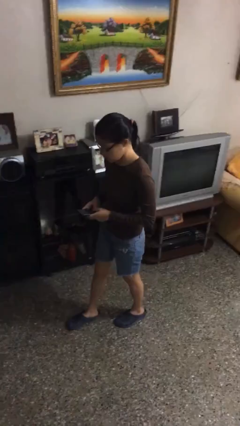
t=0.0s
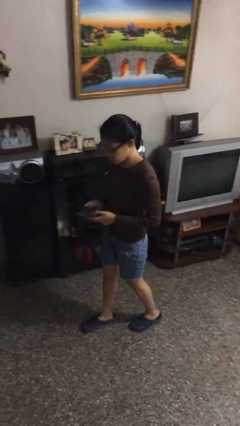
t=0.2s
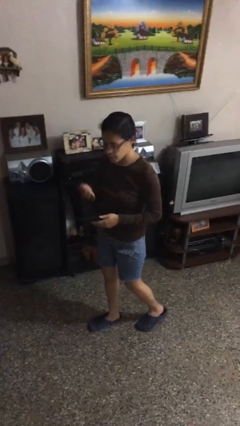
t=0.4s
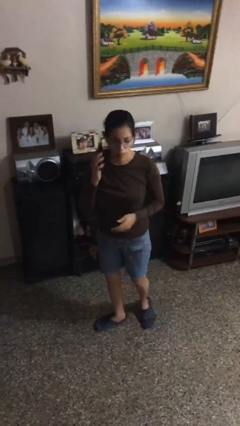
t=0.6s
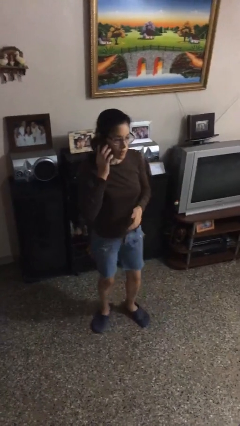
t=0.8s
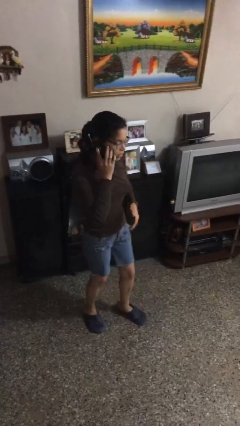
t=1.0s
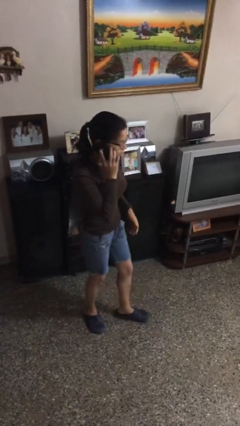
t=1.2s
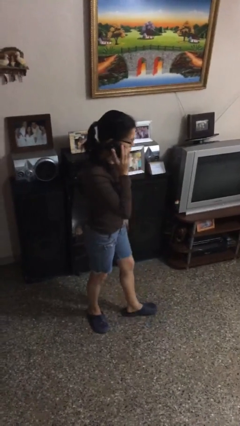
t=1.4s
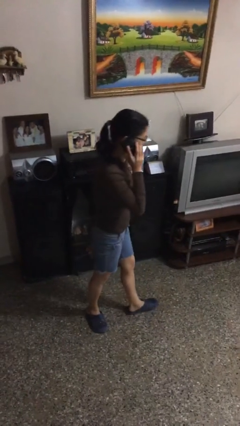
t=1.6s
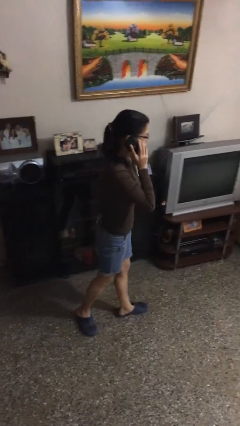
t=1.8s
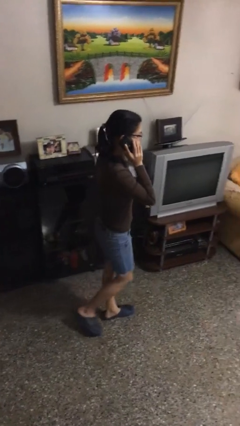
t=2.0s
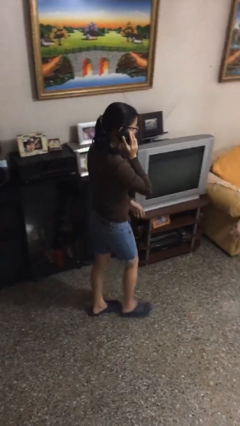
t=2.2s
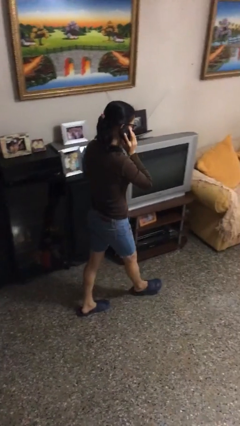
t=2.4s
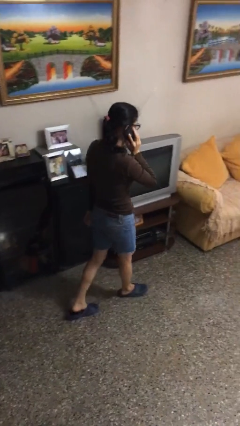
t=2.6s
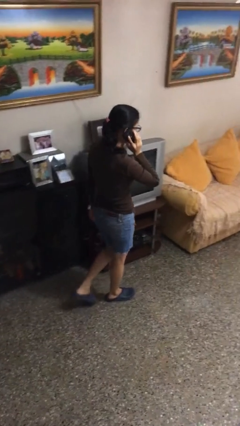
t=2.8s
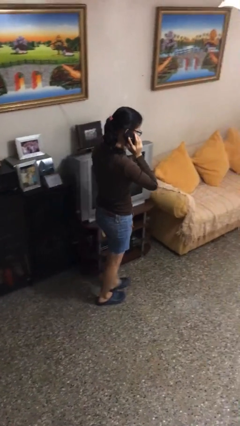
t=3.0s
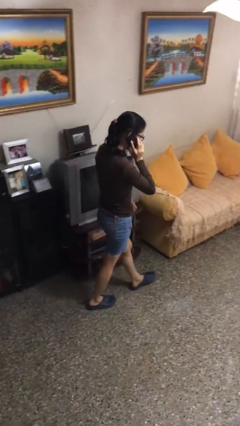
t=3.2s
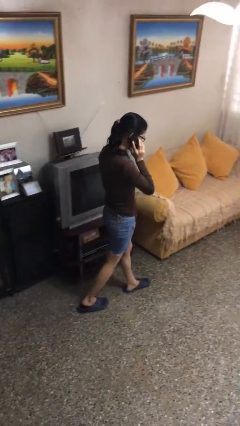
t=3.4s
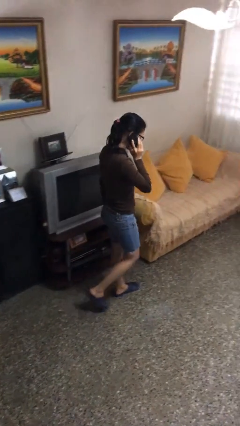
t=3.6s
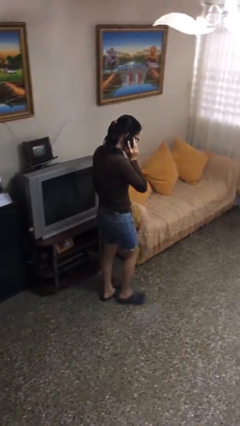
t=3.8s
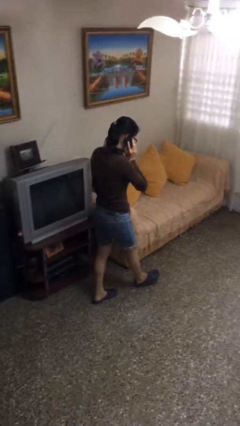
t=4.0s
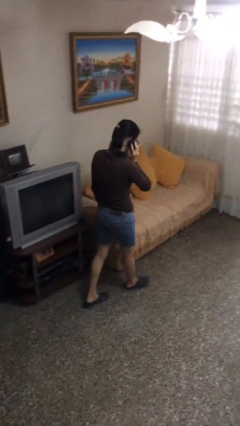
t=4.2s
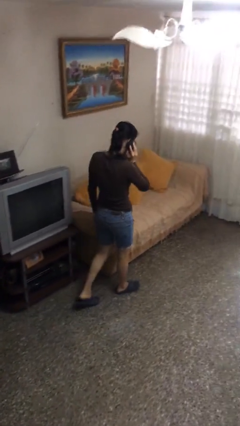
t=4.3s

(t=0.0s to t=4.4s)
person talks on phone

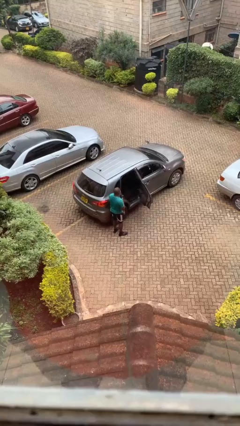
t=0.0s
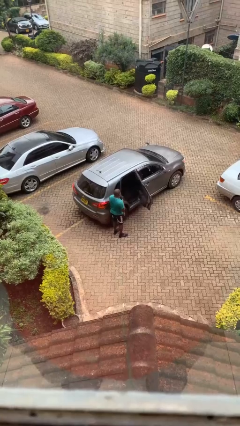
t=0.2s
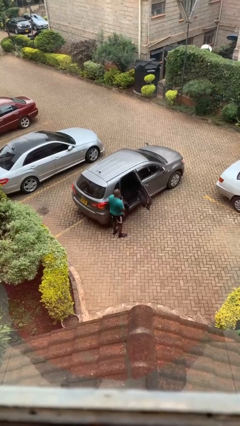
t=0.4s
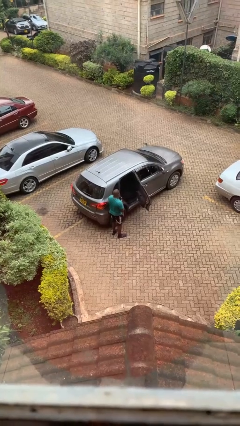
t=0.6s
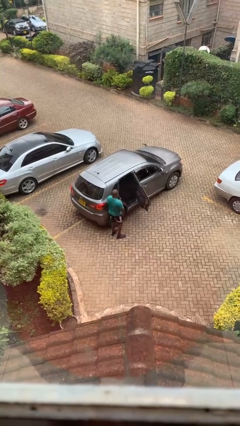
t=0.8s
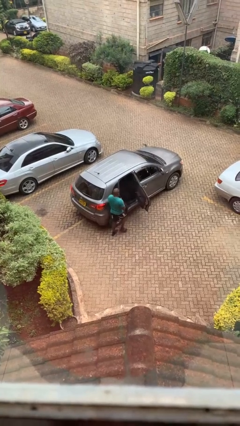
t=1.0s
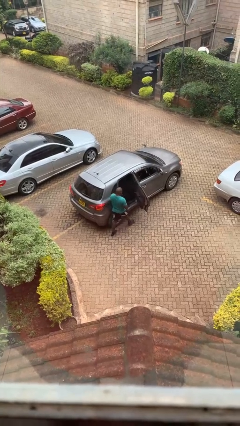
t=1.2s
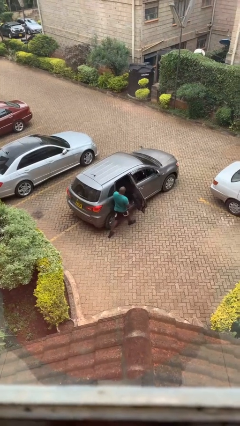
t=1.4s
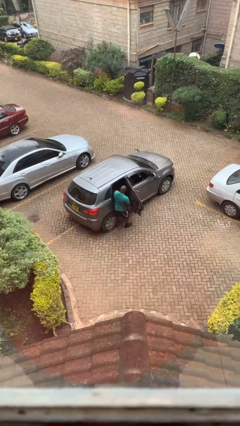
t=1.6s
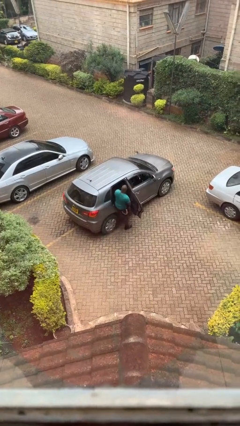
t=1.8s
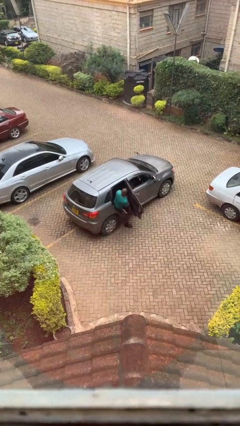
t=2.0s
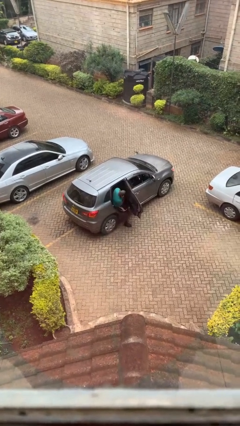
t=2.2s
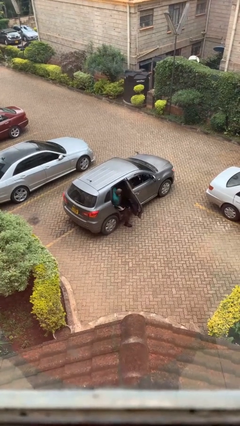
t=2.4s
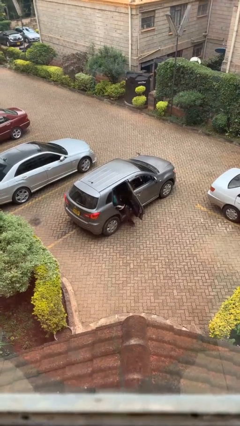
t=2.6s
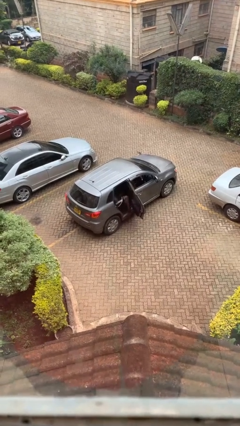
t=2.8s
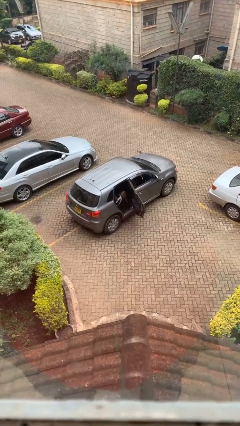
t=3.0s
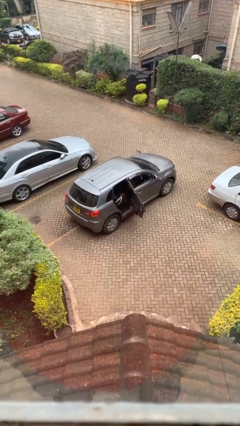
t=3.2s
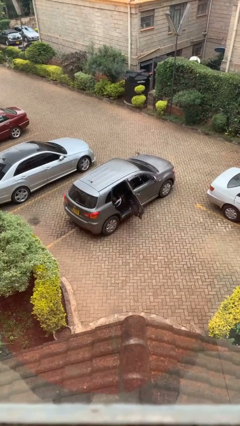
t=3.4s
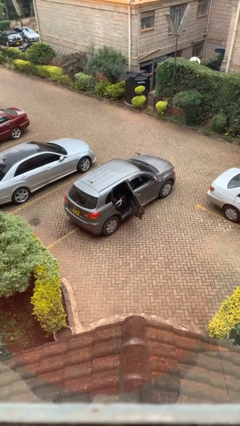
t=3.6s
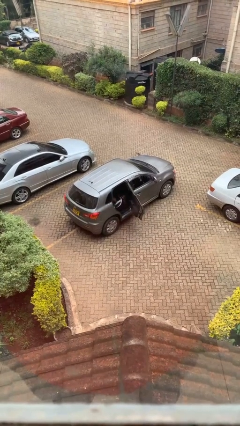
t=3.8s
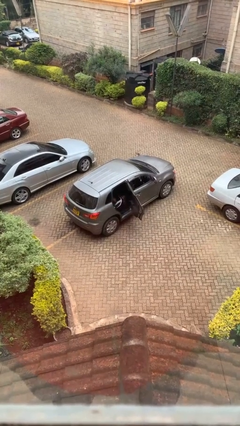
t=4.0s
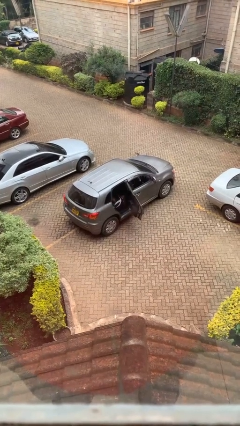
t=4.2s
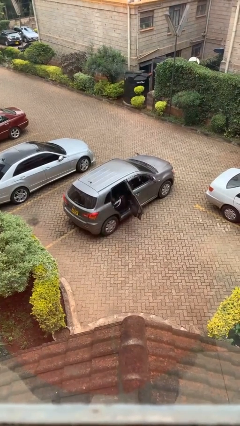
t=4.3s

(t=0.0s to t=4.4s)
person enters car

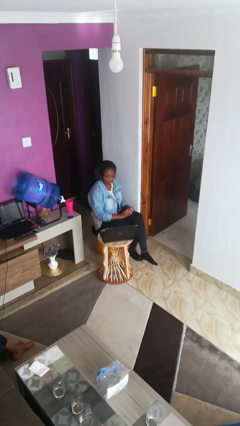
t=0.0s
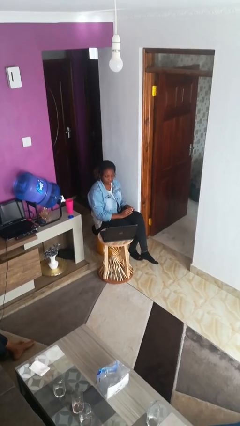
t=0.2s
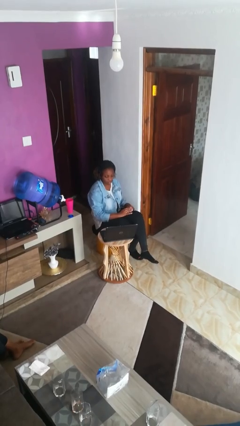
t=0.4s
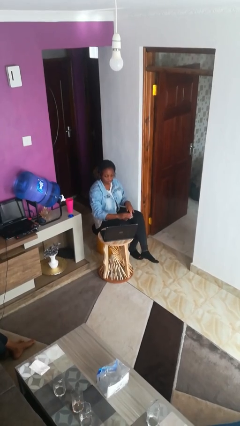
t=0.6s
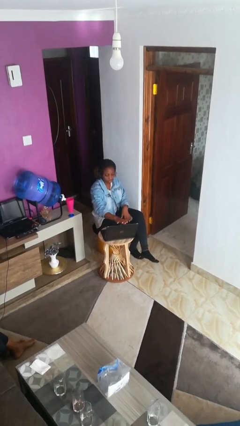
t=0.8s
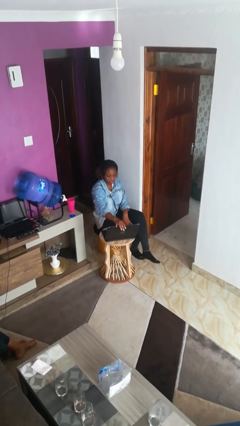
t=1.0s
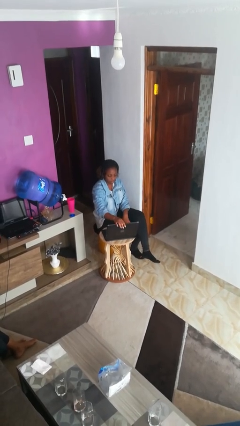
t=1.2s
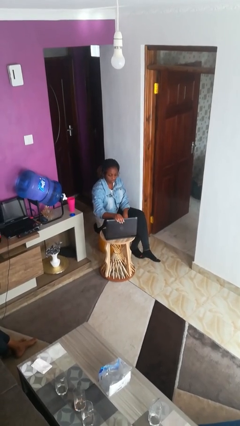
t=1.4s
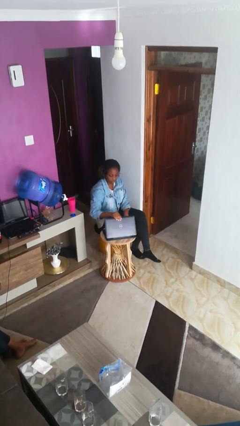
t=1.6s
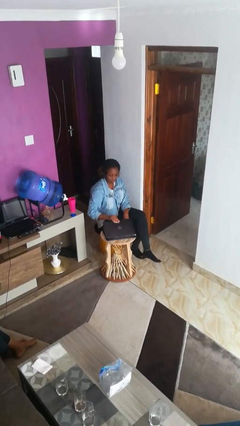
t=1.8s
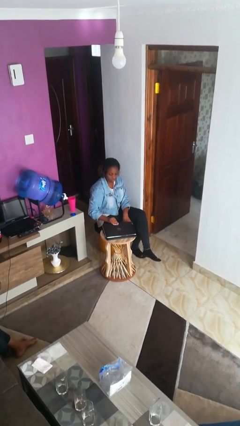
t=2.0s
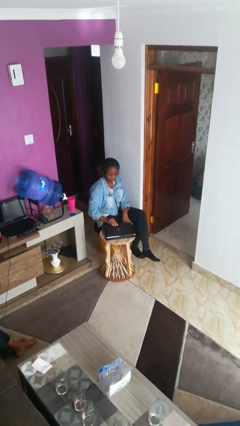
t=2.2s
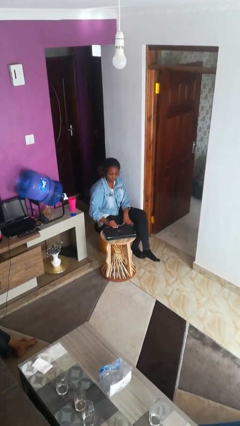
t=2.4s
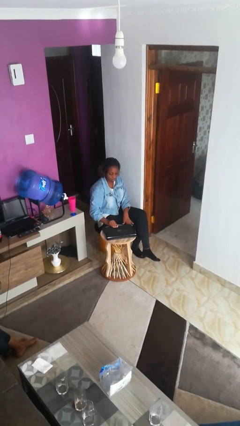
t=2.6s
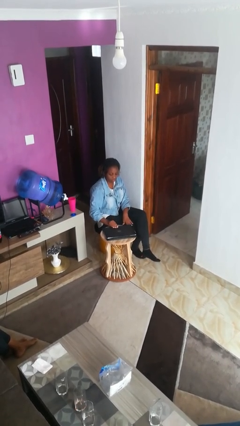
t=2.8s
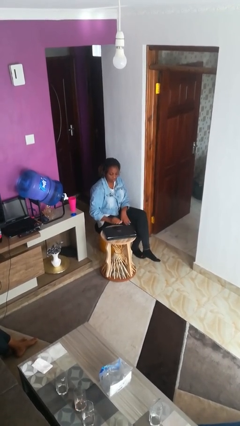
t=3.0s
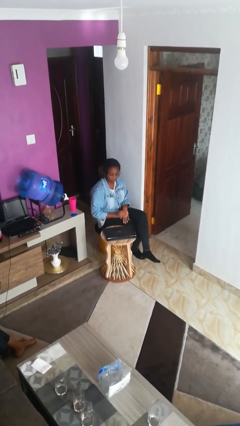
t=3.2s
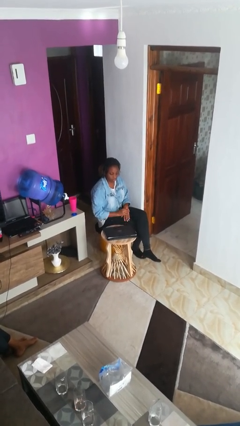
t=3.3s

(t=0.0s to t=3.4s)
person closes laptop

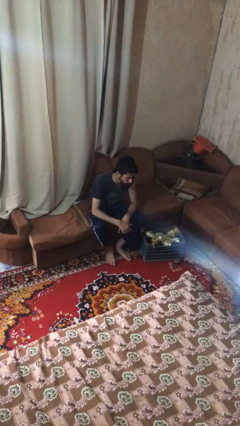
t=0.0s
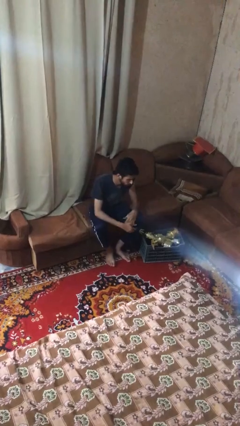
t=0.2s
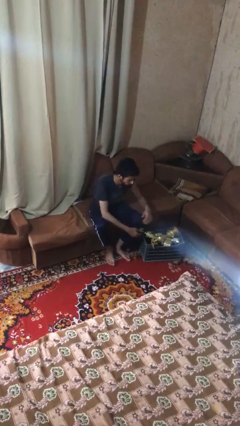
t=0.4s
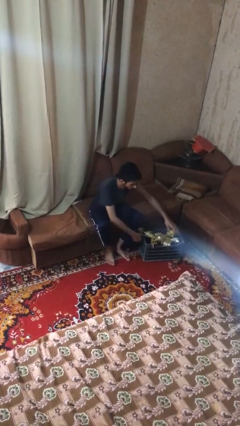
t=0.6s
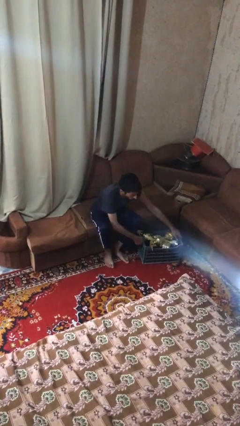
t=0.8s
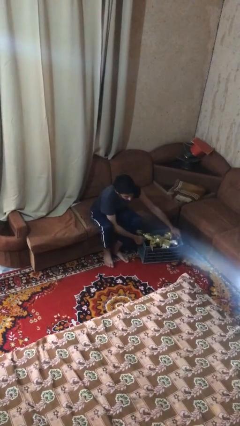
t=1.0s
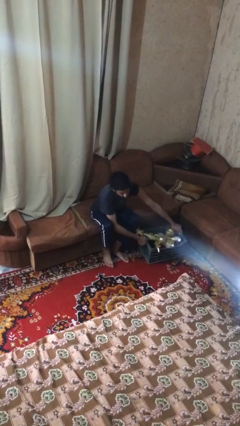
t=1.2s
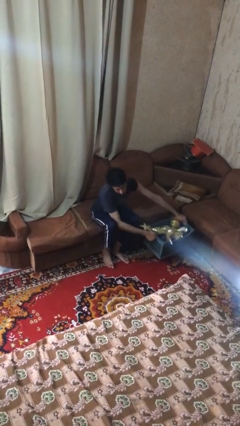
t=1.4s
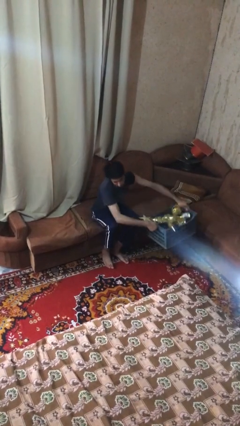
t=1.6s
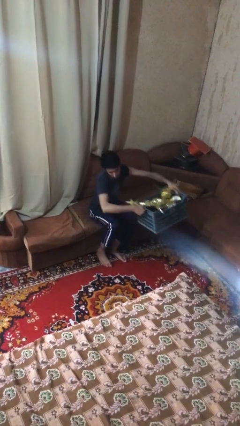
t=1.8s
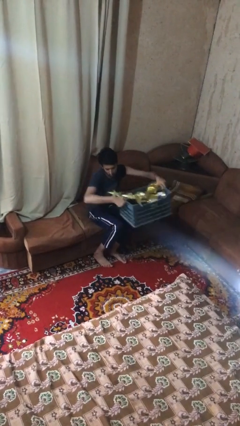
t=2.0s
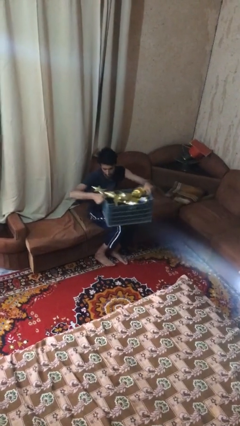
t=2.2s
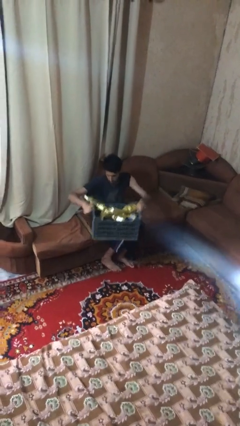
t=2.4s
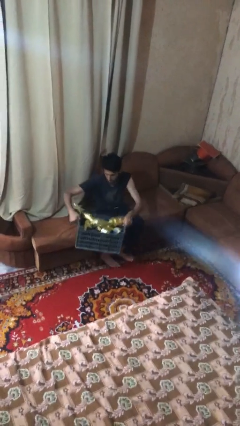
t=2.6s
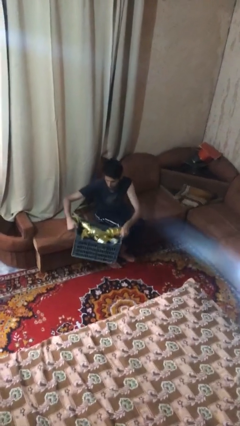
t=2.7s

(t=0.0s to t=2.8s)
person picks up object from floor

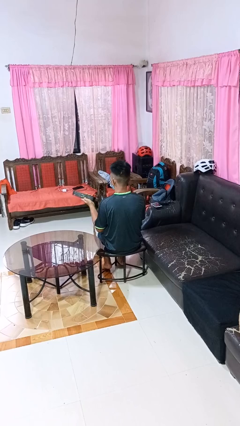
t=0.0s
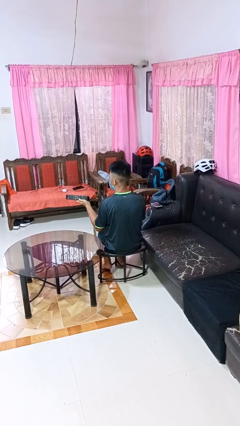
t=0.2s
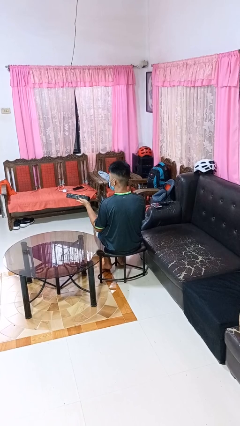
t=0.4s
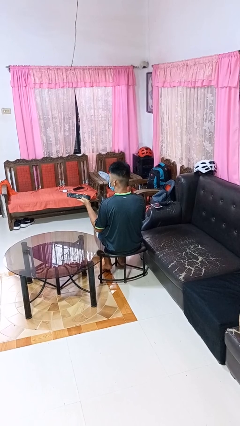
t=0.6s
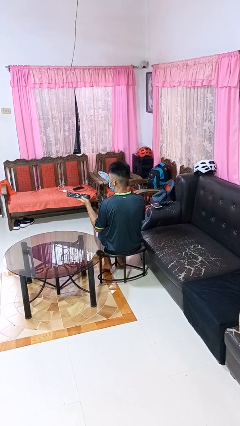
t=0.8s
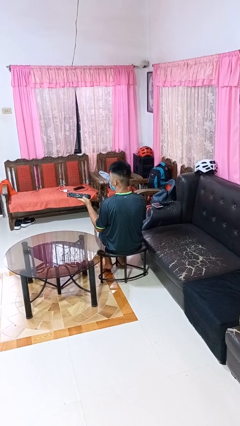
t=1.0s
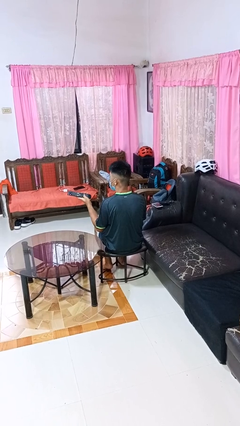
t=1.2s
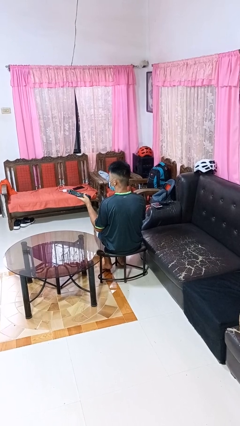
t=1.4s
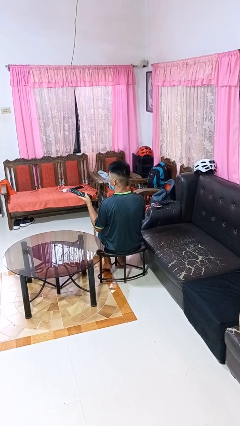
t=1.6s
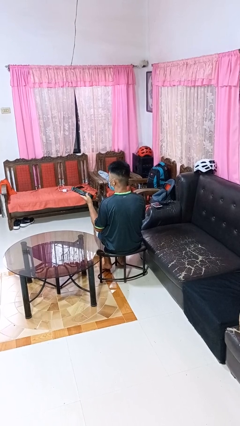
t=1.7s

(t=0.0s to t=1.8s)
person uses television remote

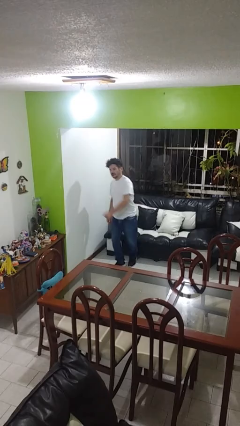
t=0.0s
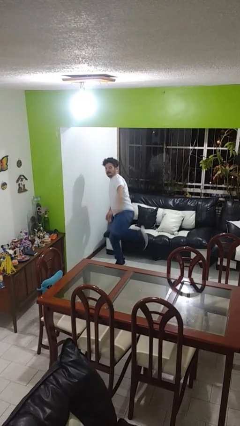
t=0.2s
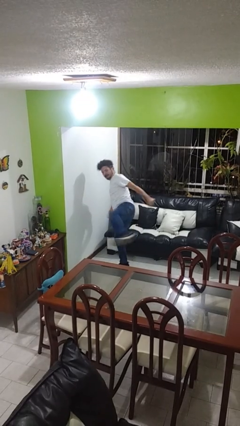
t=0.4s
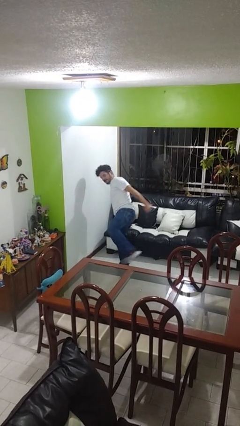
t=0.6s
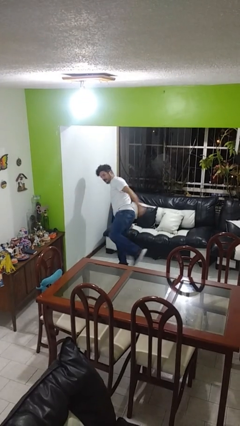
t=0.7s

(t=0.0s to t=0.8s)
person karate kicks
